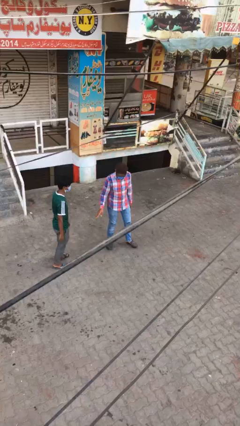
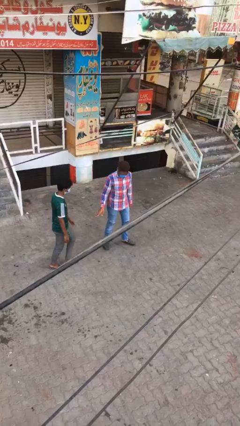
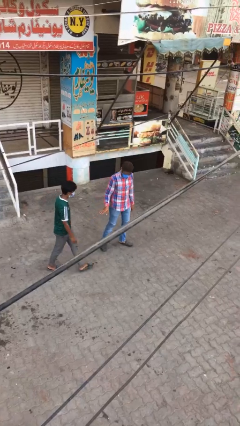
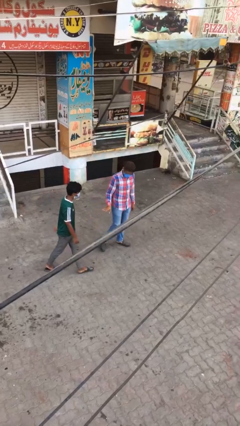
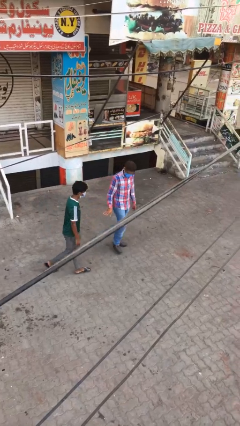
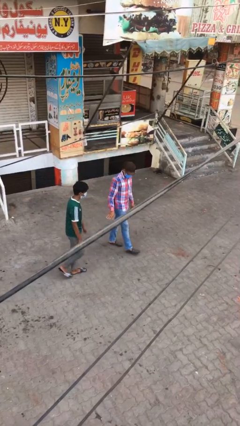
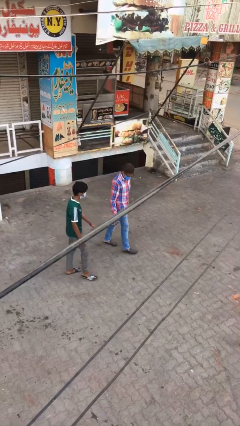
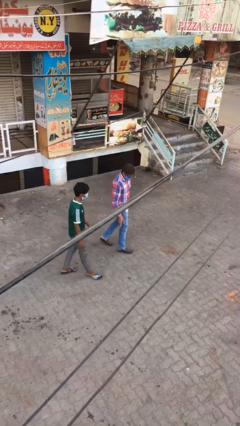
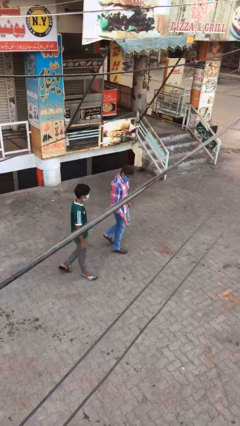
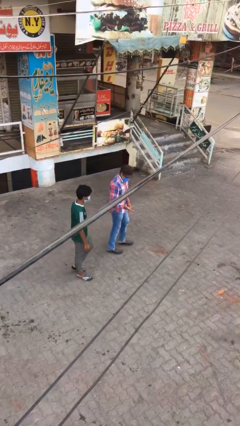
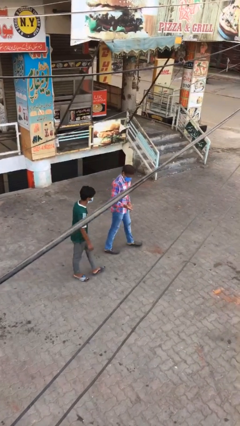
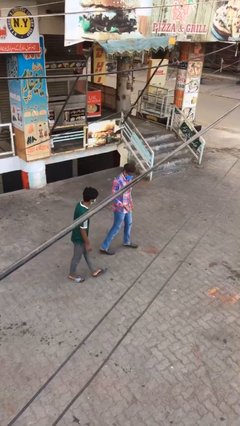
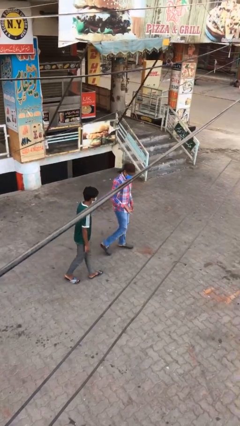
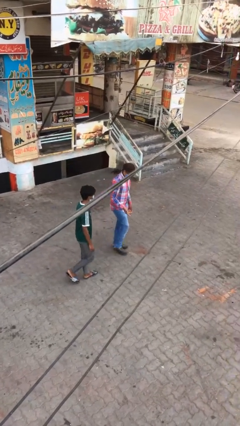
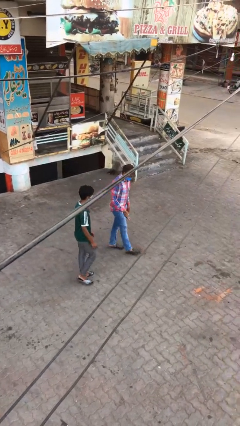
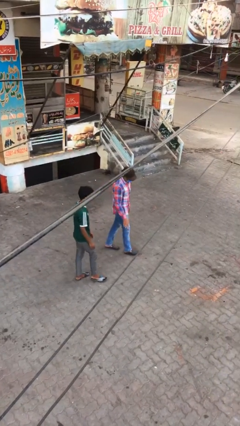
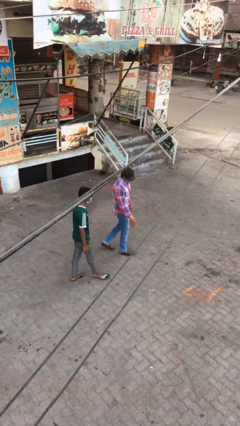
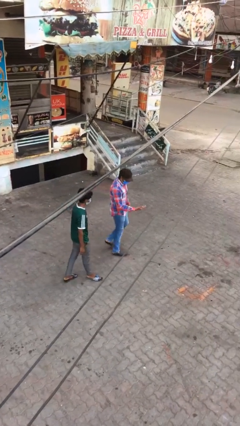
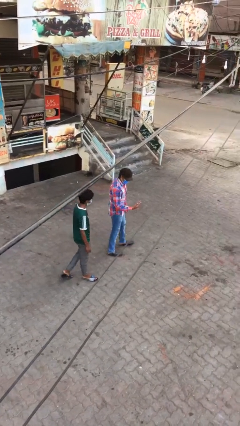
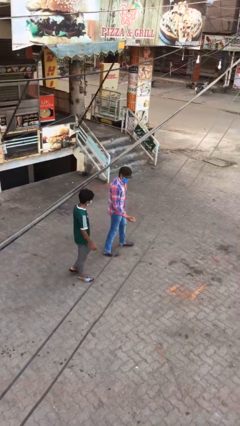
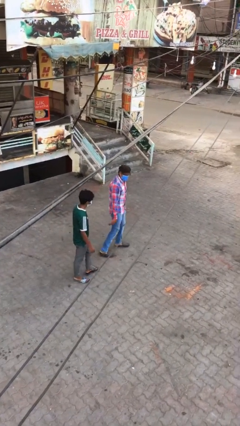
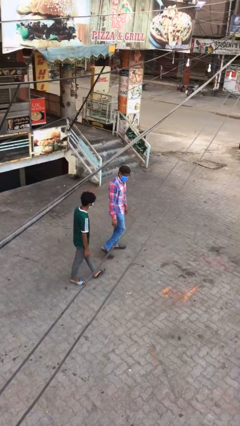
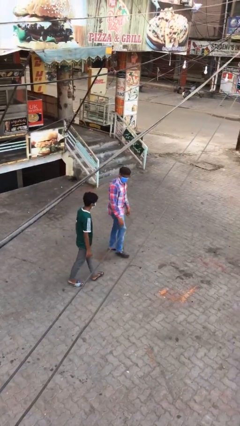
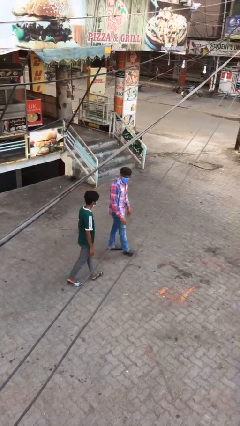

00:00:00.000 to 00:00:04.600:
person talks to person

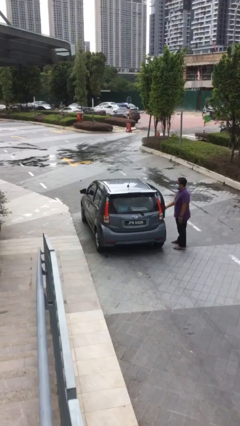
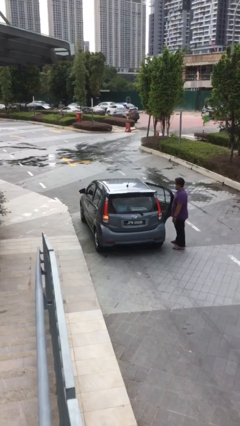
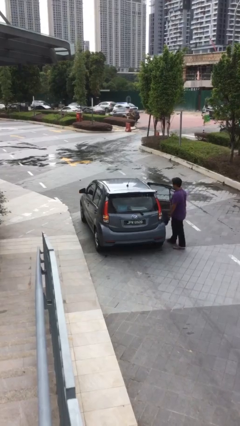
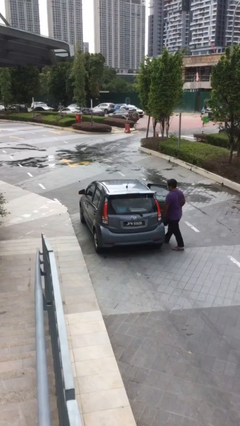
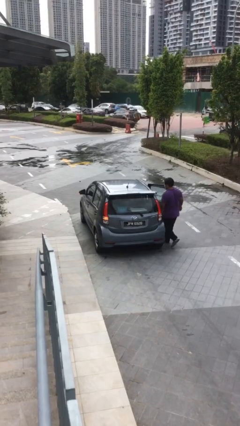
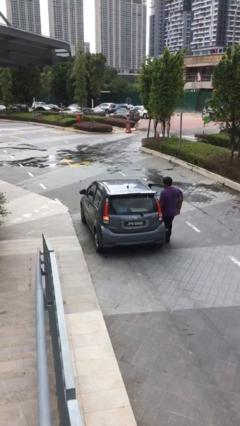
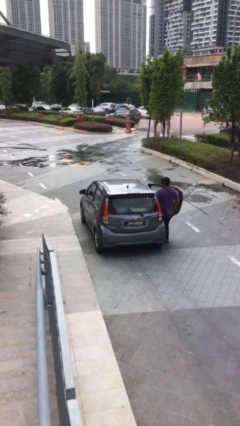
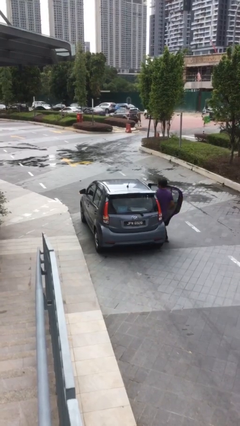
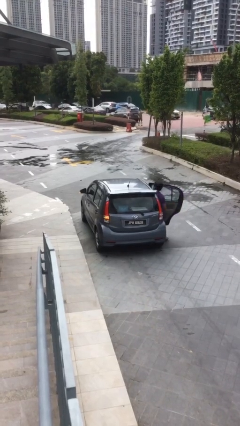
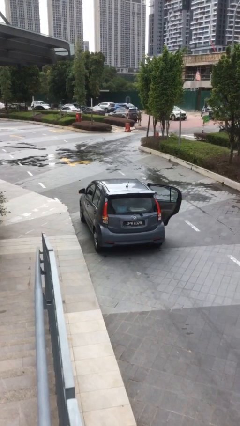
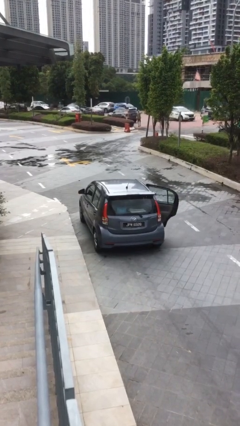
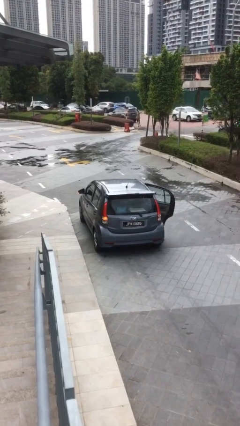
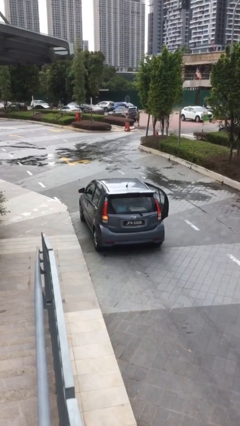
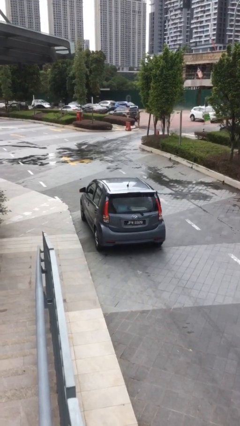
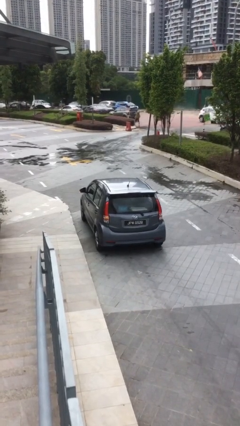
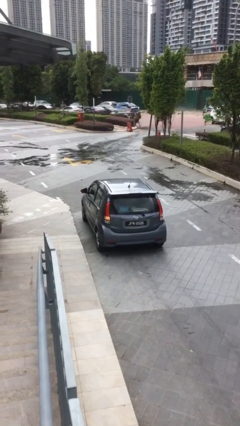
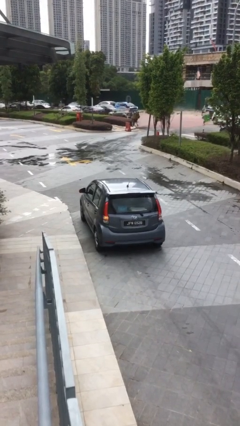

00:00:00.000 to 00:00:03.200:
car picks up person

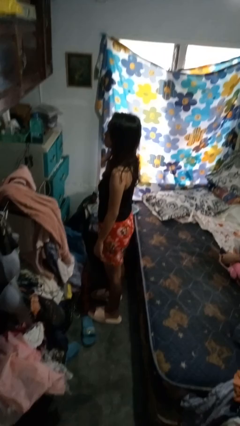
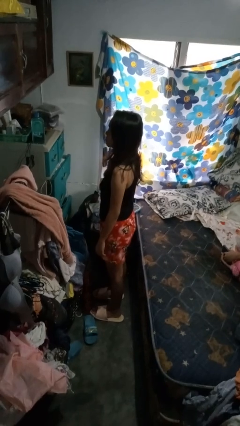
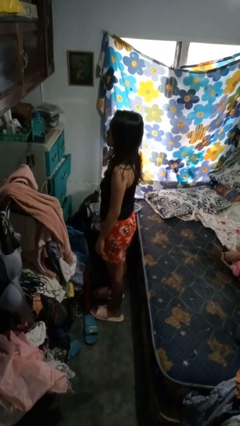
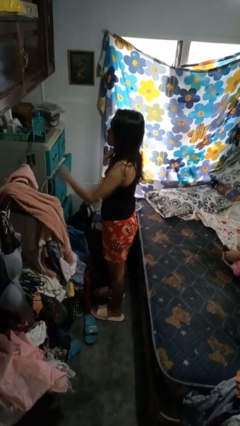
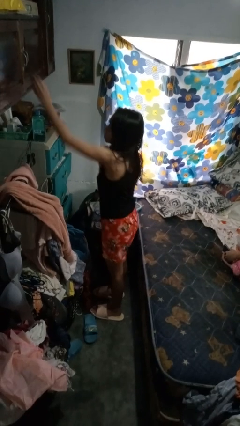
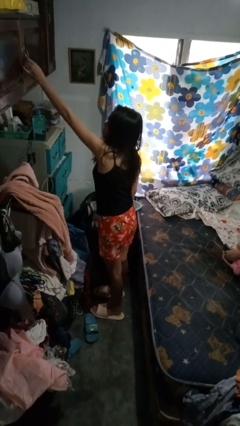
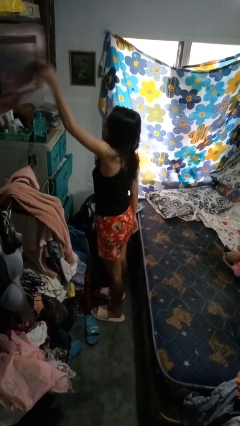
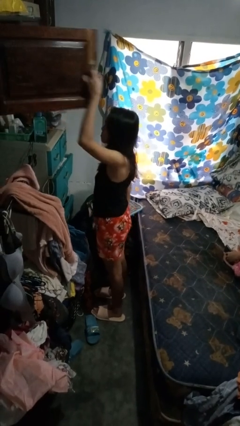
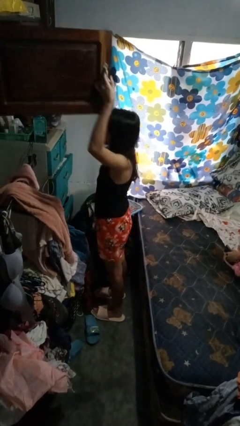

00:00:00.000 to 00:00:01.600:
person opens closet door

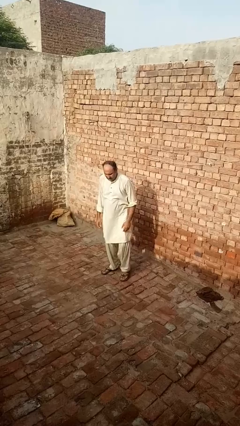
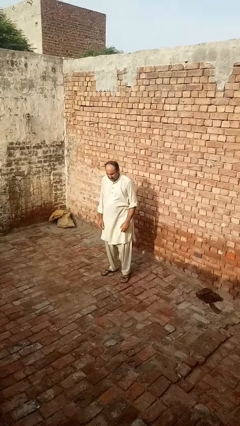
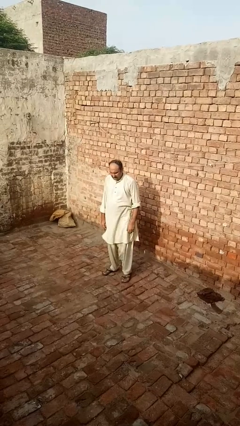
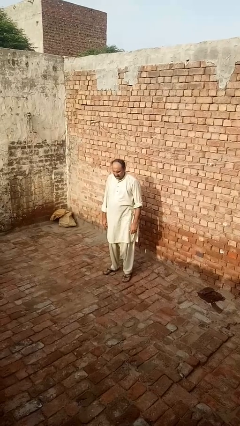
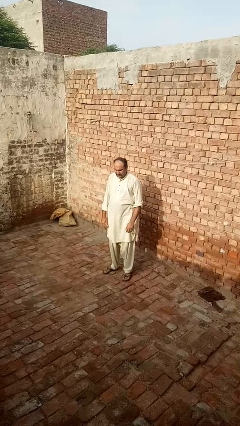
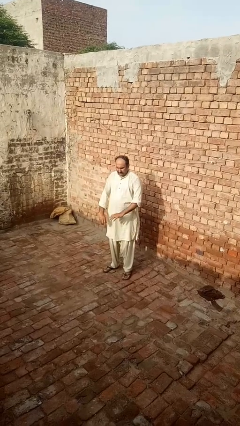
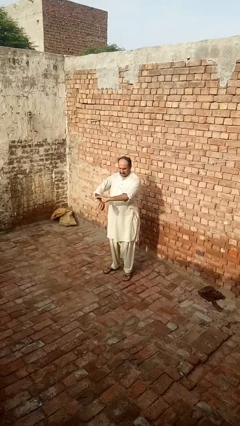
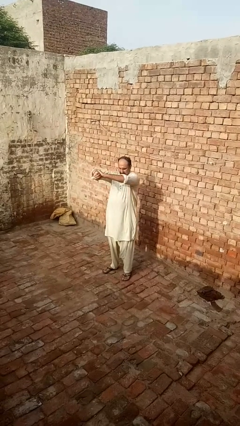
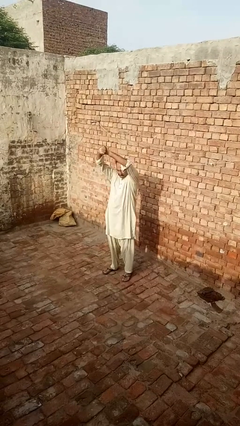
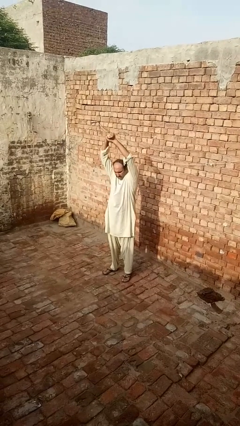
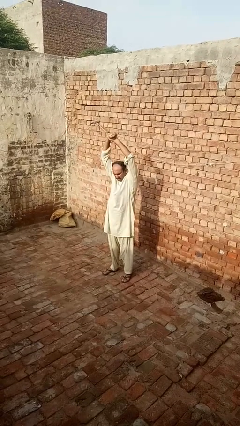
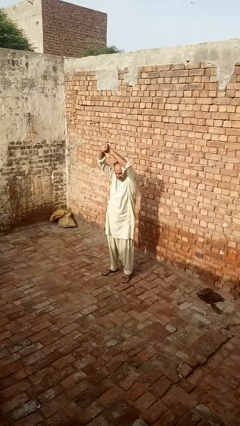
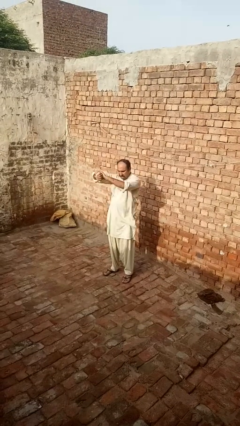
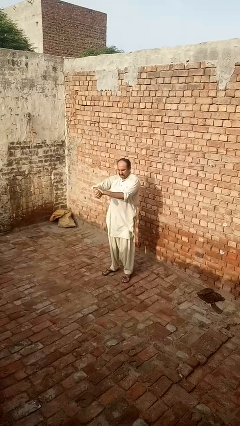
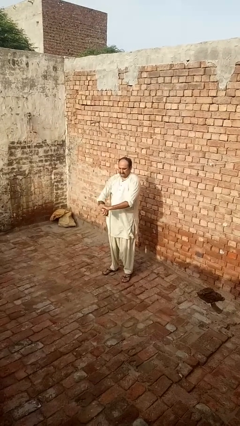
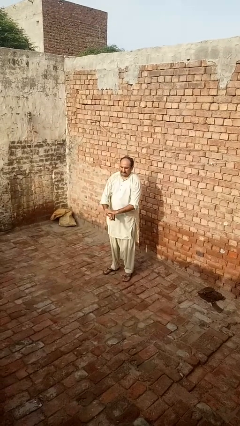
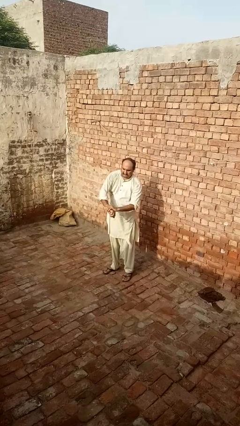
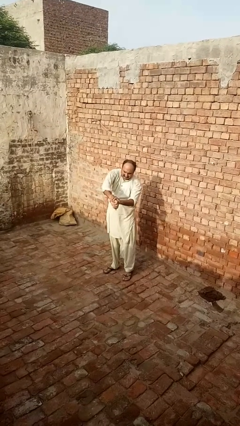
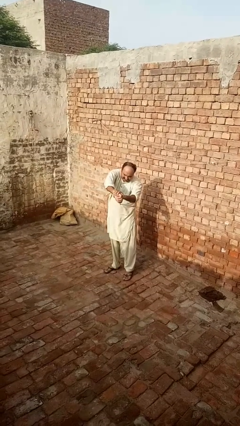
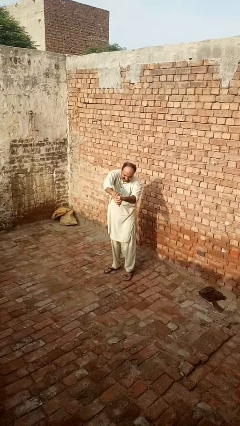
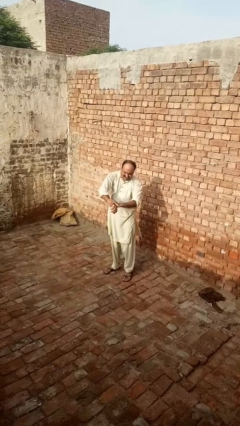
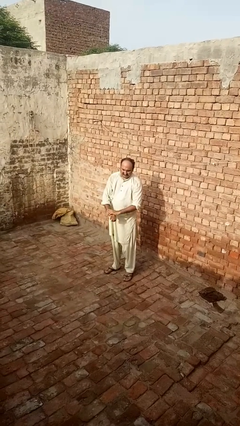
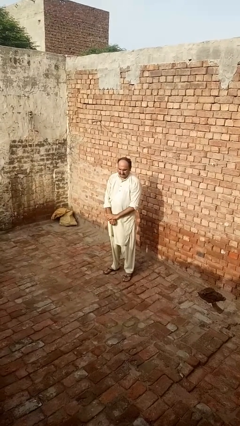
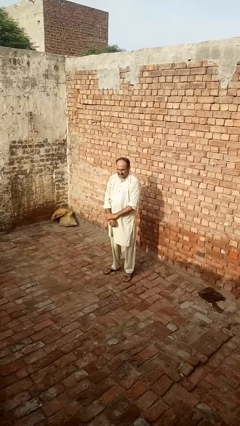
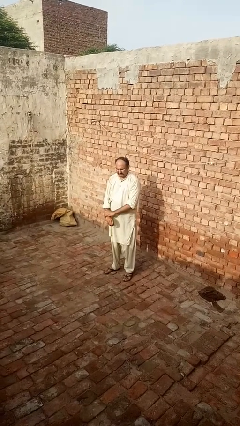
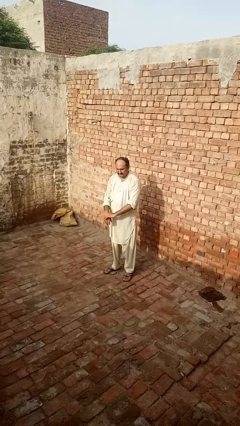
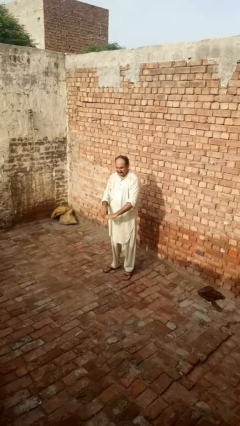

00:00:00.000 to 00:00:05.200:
person stretches arms to side

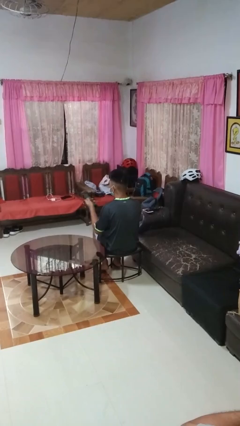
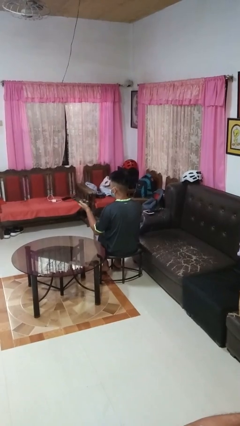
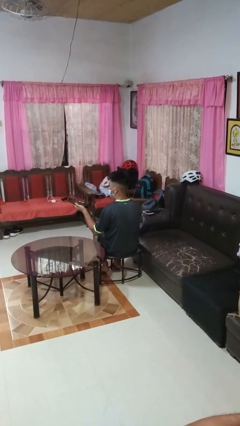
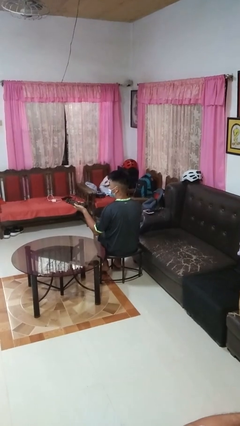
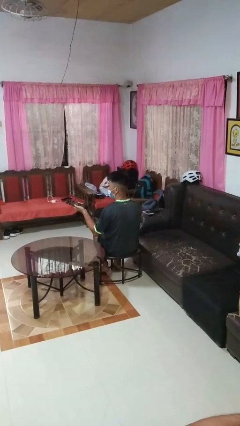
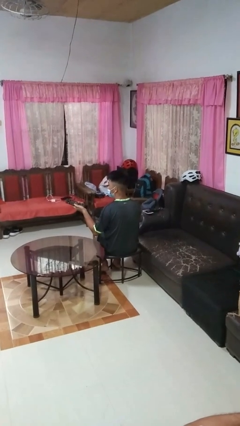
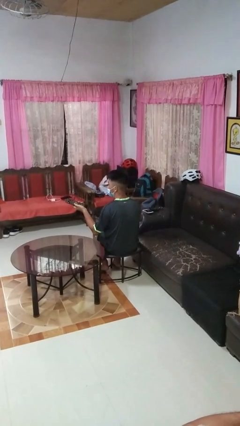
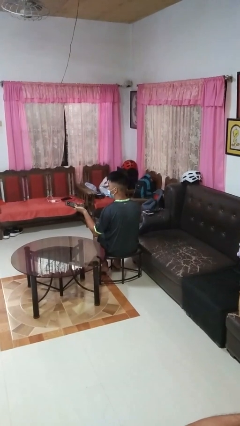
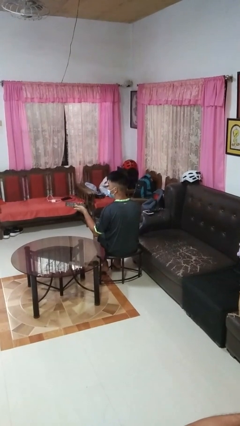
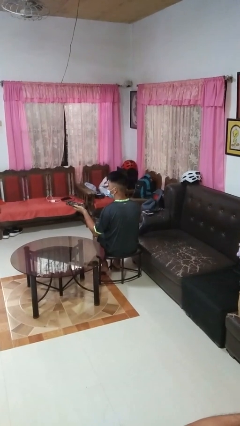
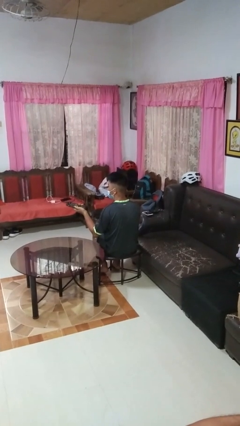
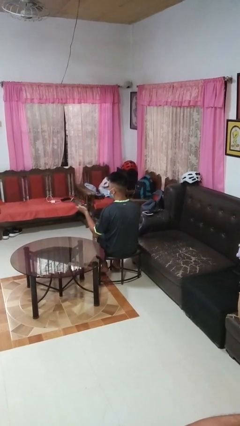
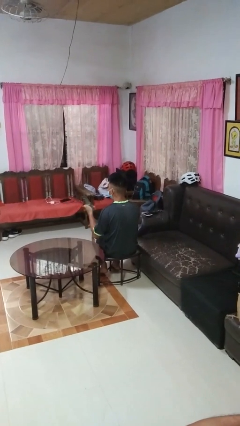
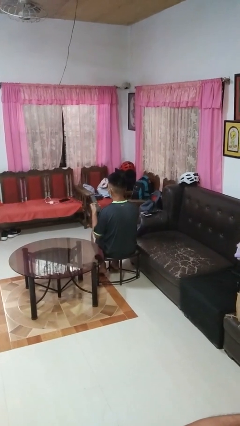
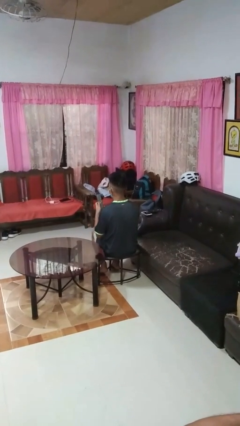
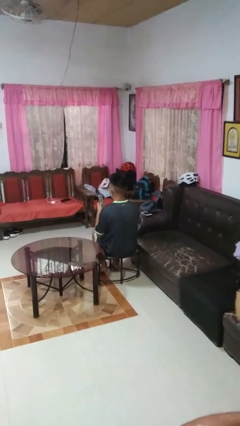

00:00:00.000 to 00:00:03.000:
person uses television remote
